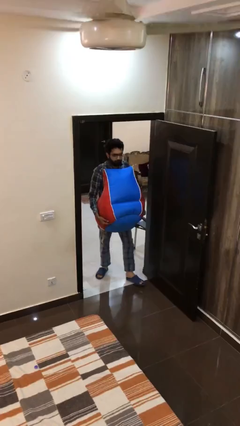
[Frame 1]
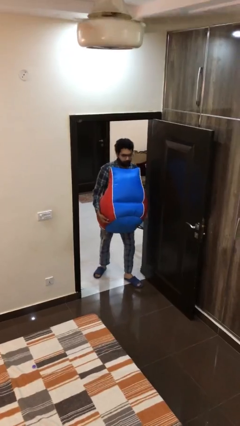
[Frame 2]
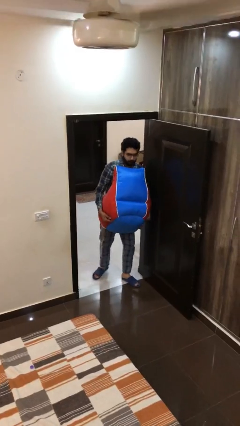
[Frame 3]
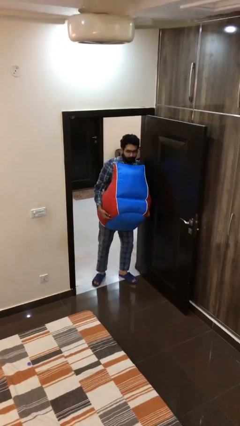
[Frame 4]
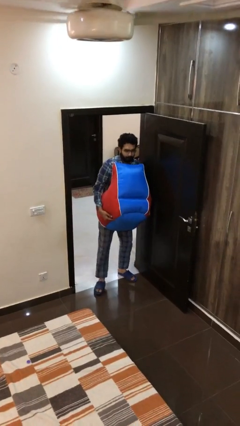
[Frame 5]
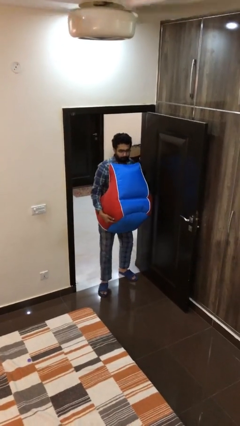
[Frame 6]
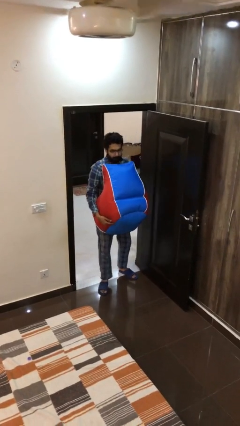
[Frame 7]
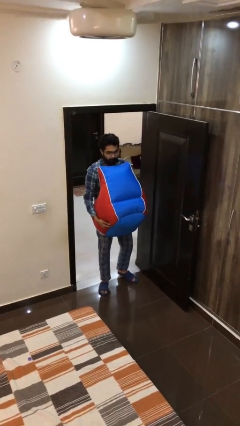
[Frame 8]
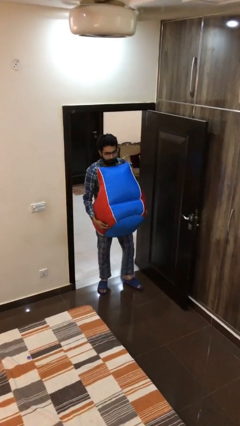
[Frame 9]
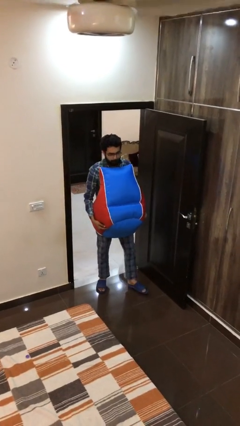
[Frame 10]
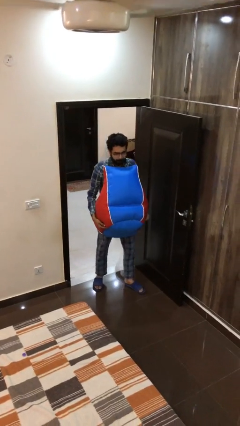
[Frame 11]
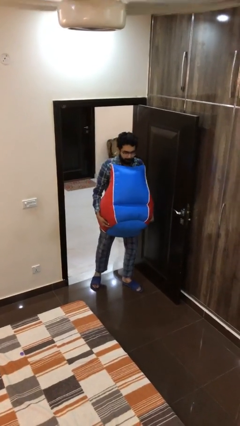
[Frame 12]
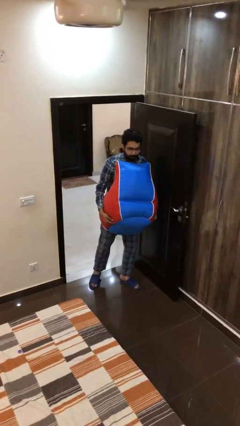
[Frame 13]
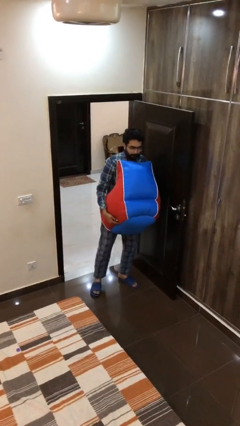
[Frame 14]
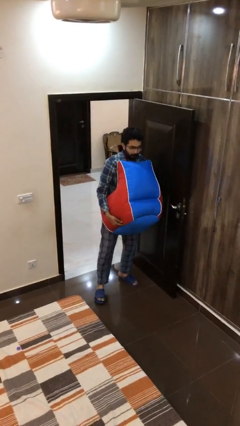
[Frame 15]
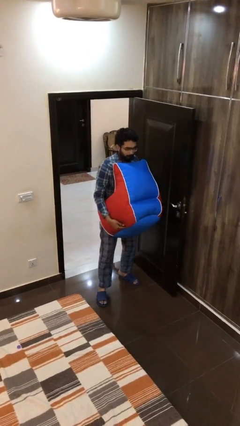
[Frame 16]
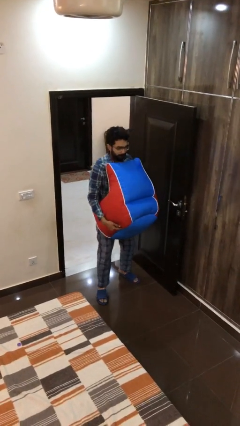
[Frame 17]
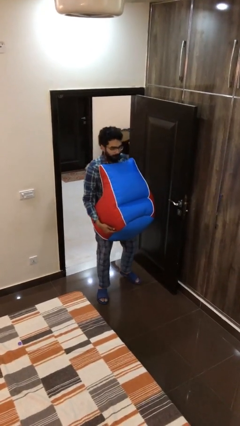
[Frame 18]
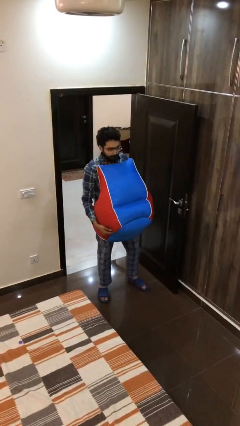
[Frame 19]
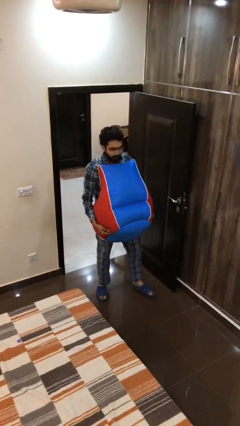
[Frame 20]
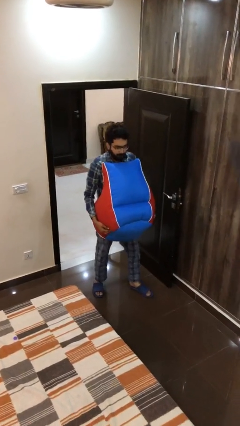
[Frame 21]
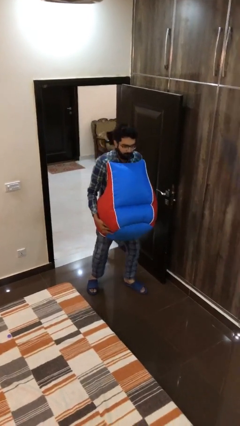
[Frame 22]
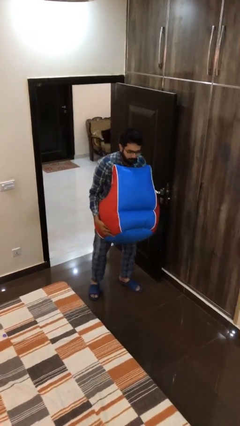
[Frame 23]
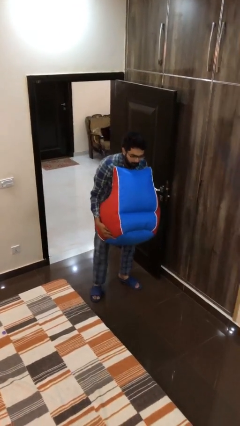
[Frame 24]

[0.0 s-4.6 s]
person carries heavy object

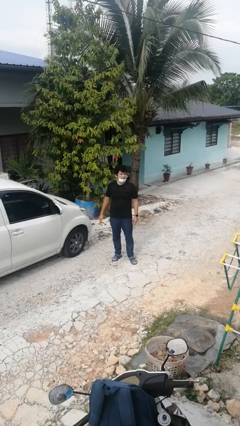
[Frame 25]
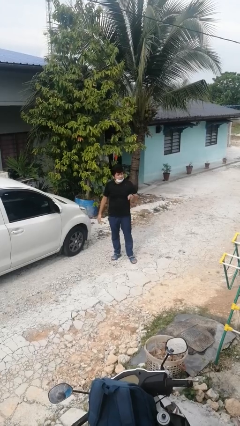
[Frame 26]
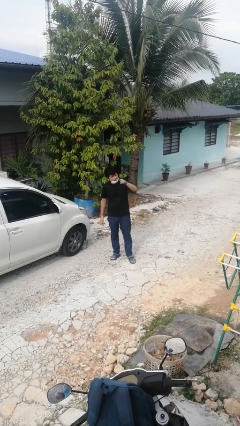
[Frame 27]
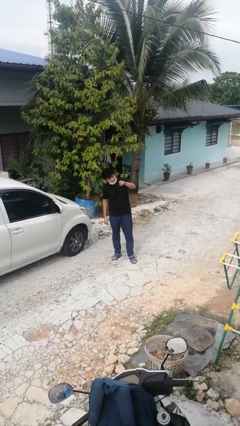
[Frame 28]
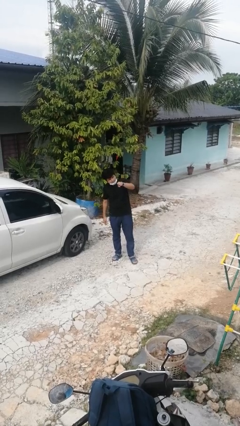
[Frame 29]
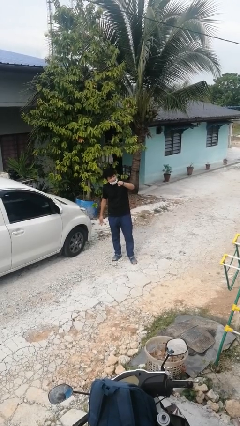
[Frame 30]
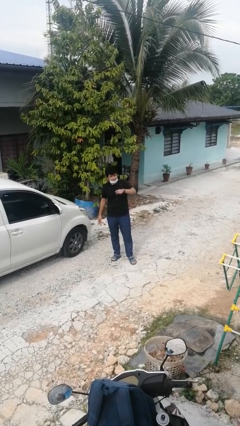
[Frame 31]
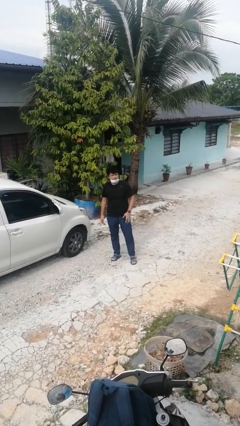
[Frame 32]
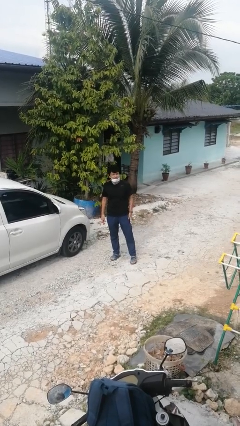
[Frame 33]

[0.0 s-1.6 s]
person points at person

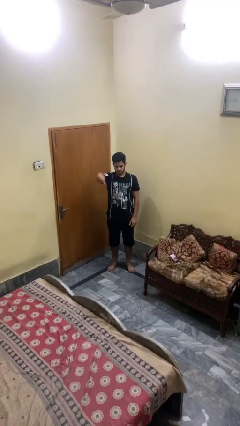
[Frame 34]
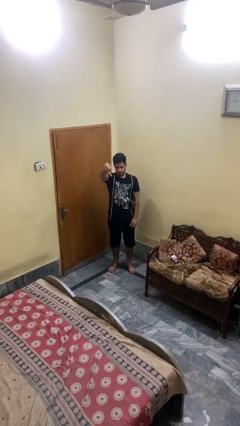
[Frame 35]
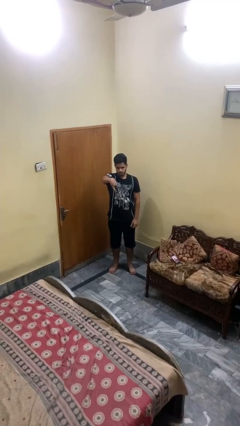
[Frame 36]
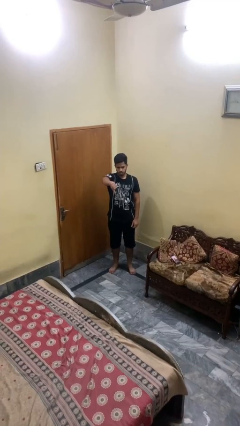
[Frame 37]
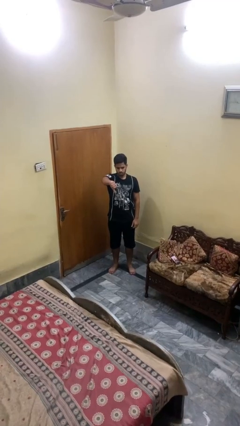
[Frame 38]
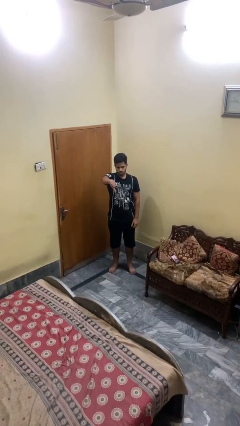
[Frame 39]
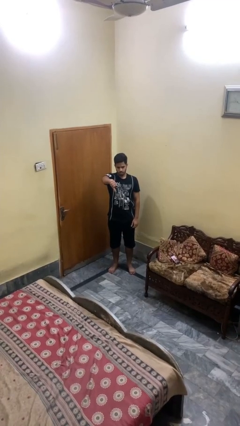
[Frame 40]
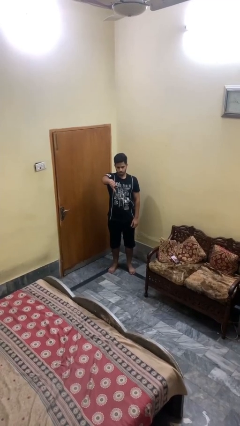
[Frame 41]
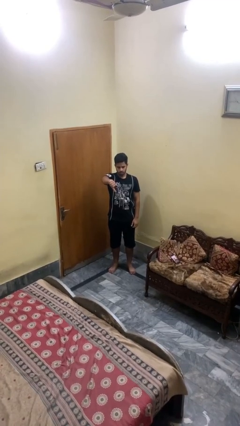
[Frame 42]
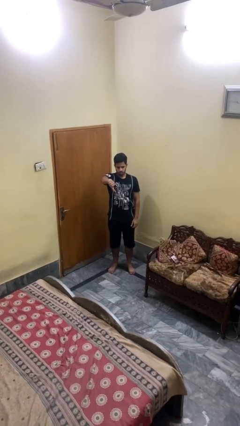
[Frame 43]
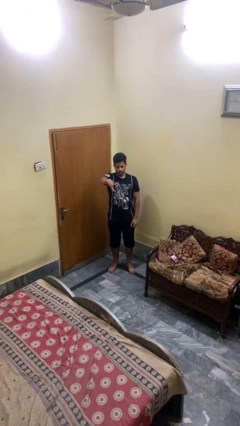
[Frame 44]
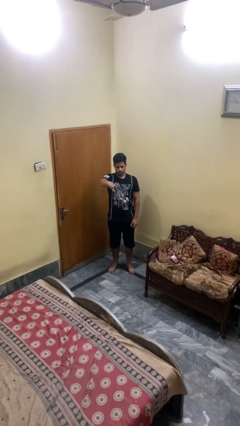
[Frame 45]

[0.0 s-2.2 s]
person gestures thumbs down

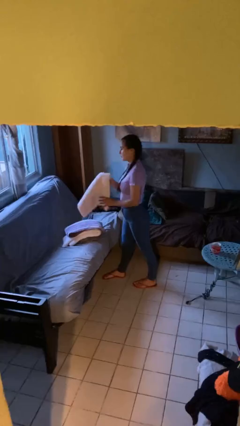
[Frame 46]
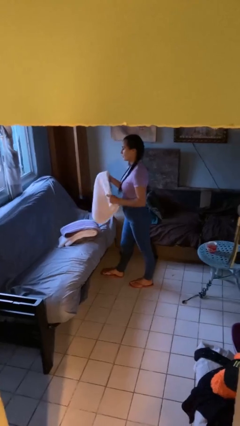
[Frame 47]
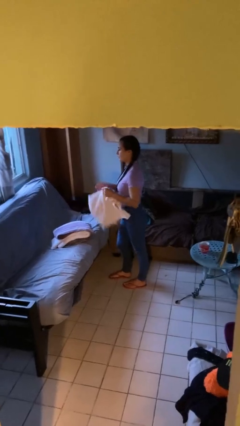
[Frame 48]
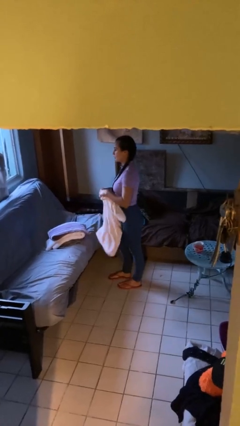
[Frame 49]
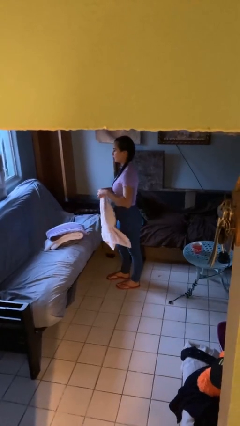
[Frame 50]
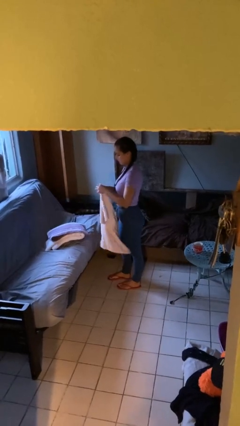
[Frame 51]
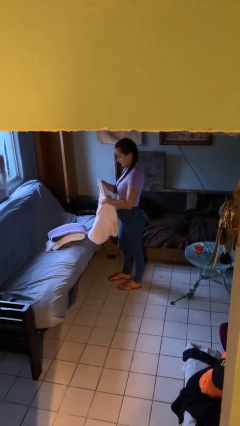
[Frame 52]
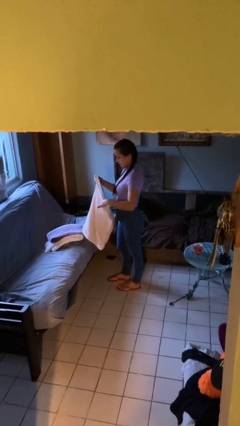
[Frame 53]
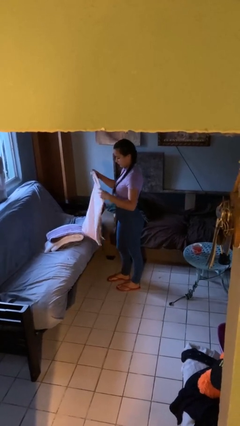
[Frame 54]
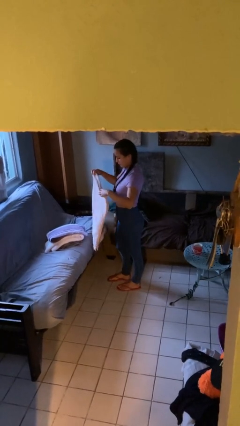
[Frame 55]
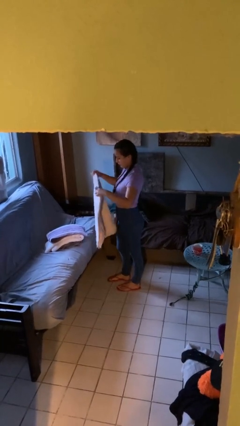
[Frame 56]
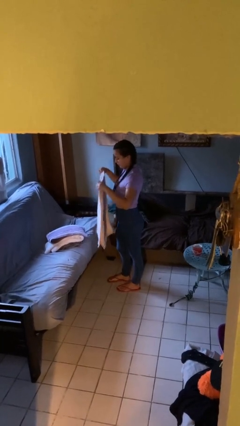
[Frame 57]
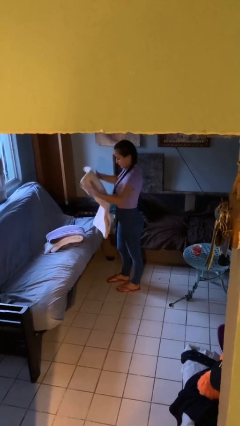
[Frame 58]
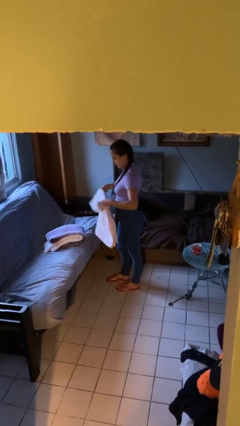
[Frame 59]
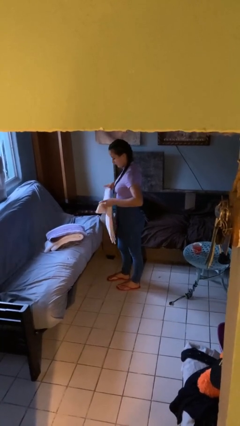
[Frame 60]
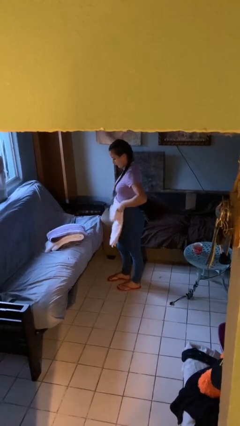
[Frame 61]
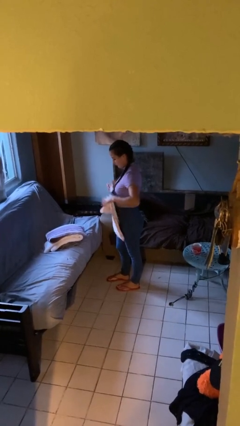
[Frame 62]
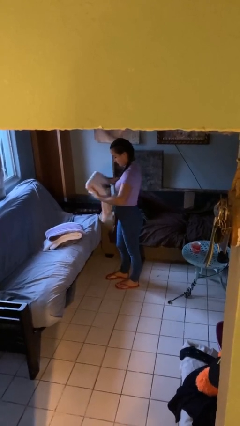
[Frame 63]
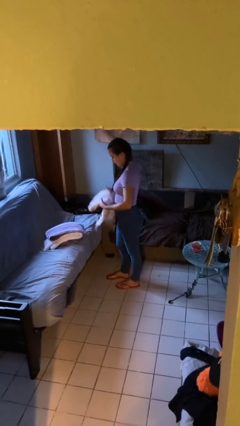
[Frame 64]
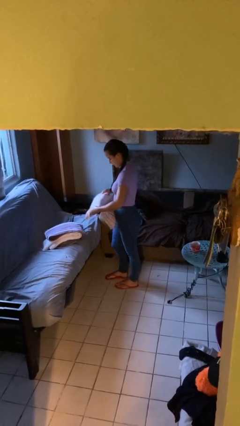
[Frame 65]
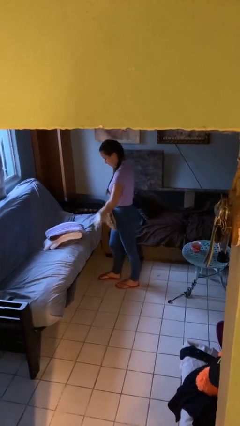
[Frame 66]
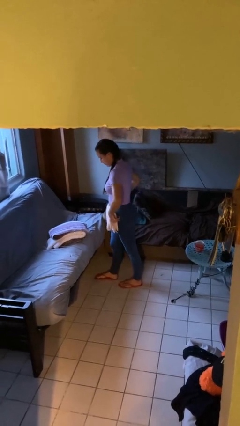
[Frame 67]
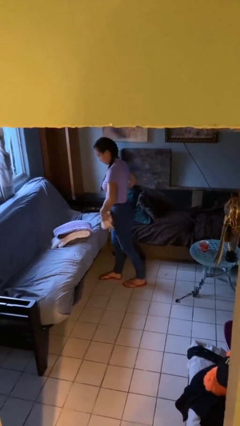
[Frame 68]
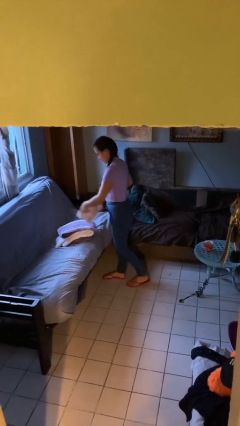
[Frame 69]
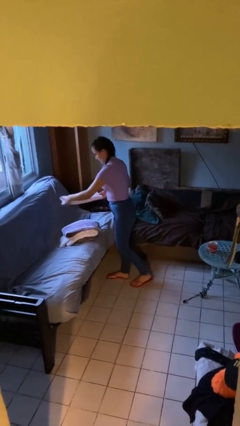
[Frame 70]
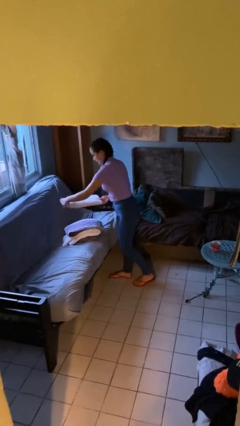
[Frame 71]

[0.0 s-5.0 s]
person folds towel

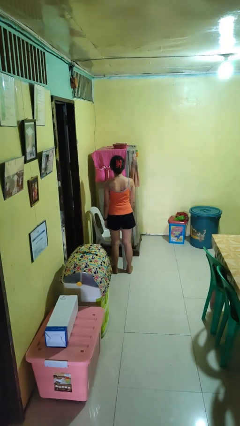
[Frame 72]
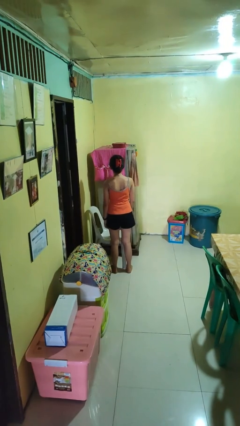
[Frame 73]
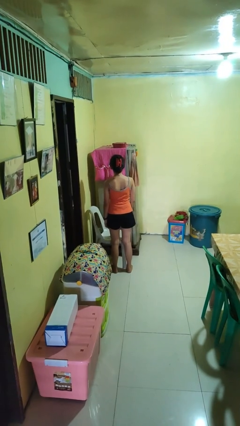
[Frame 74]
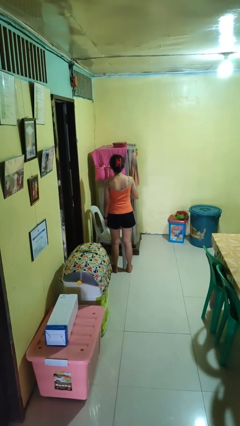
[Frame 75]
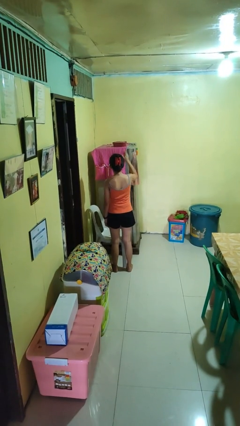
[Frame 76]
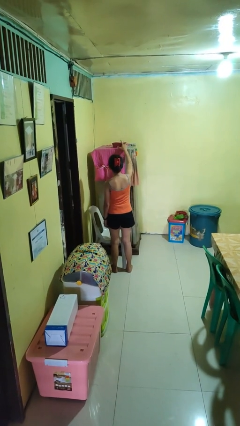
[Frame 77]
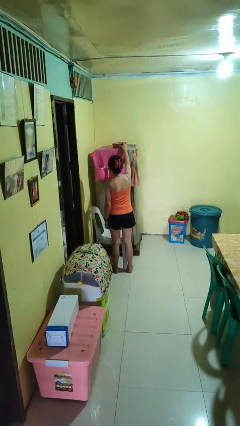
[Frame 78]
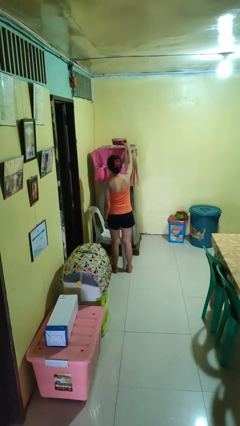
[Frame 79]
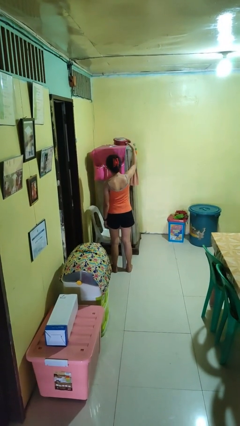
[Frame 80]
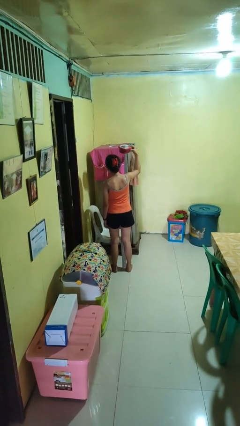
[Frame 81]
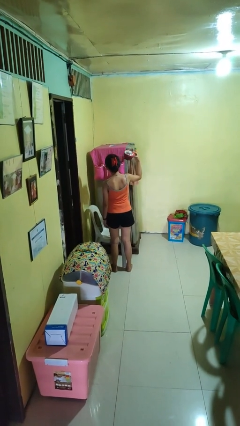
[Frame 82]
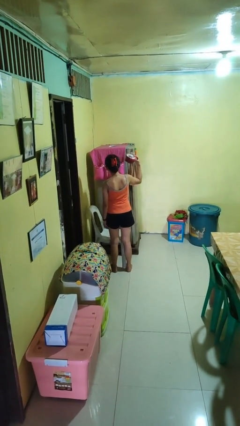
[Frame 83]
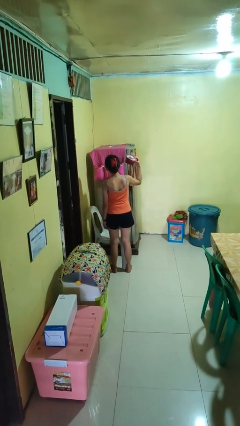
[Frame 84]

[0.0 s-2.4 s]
person picks up object from shelf

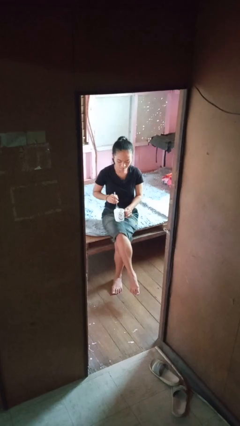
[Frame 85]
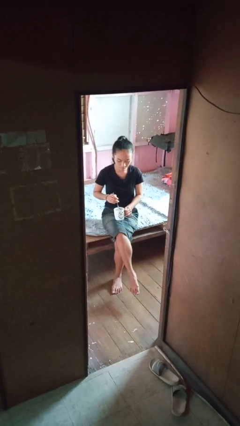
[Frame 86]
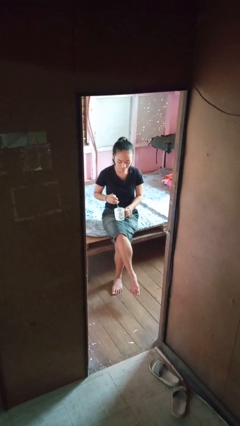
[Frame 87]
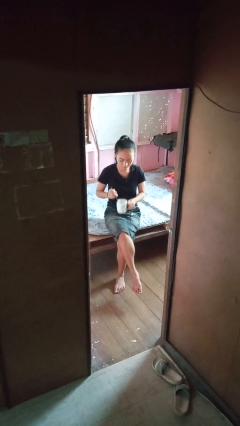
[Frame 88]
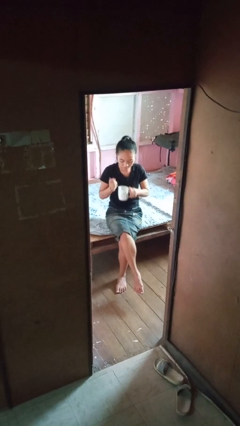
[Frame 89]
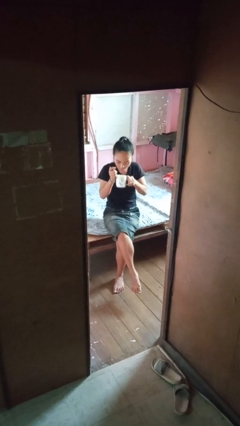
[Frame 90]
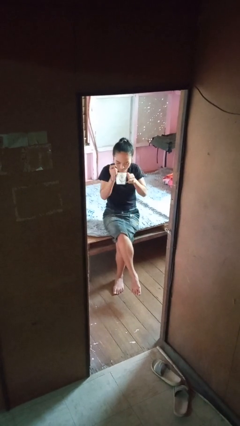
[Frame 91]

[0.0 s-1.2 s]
person stirs mug
